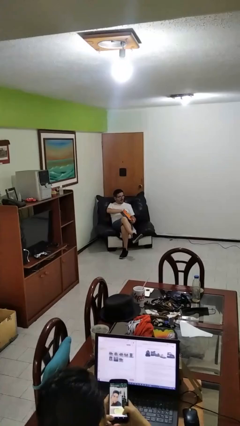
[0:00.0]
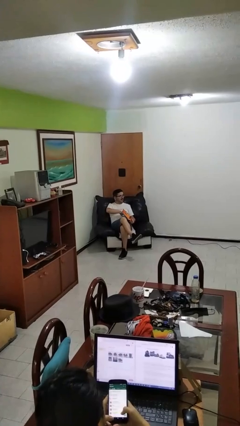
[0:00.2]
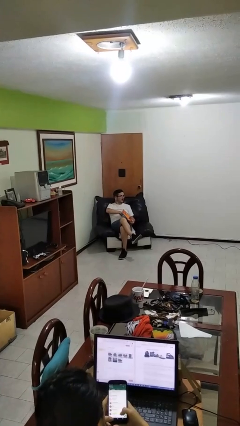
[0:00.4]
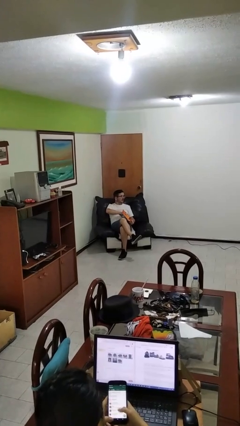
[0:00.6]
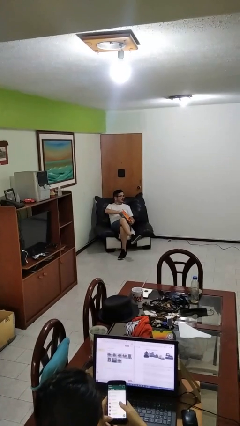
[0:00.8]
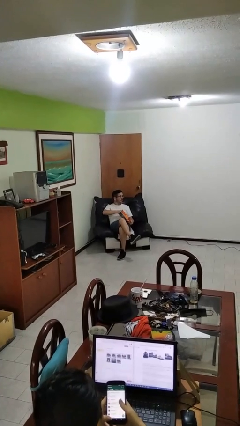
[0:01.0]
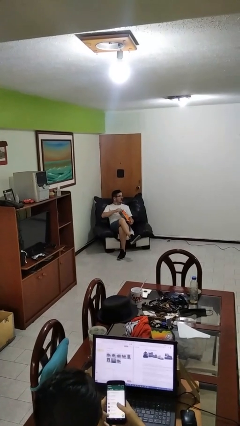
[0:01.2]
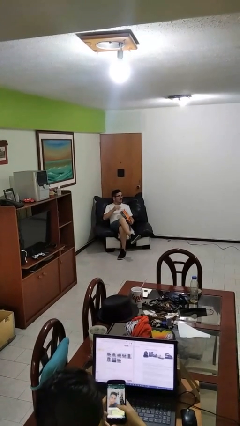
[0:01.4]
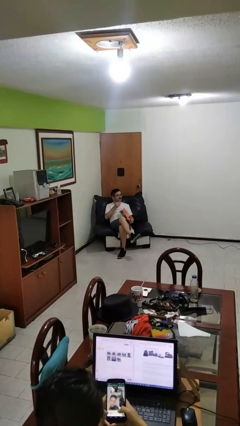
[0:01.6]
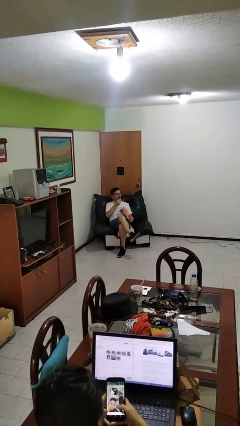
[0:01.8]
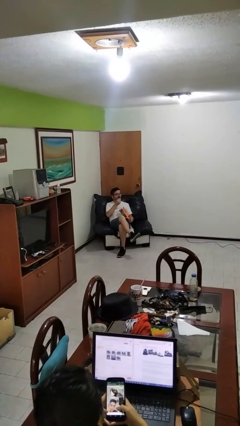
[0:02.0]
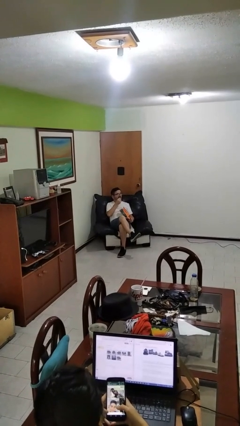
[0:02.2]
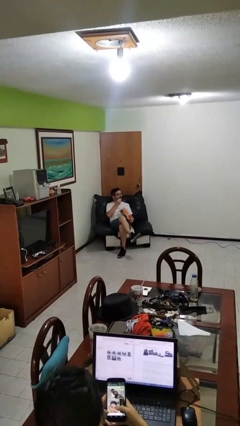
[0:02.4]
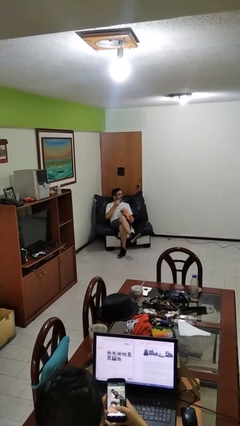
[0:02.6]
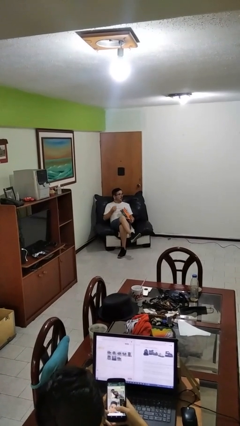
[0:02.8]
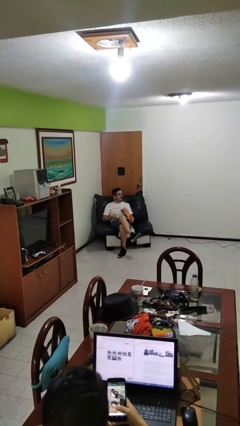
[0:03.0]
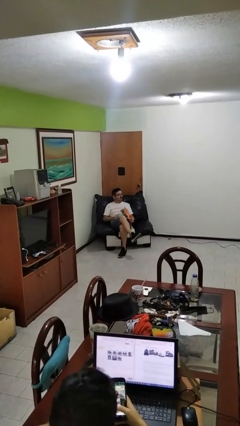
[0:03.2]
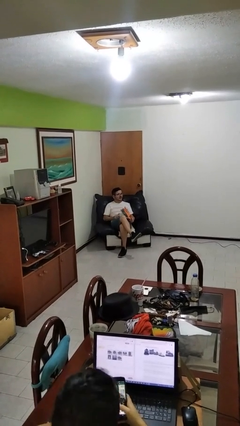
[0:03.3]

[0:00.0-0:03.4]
person eats snack from bag

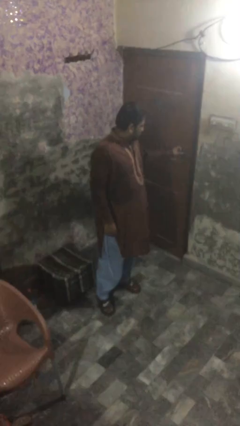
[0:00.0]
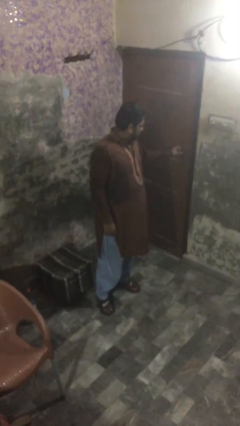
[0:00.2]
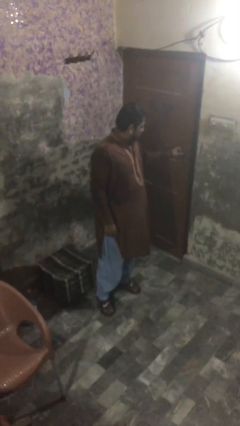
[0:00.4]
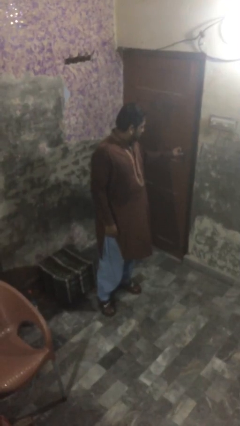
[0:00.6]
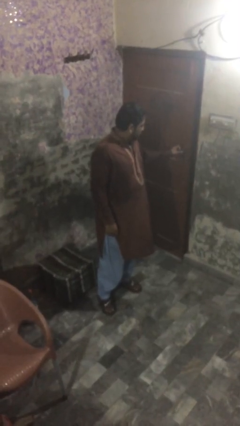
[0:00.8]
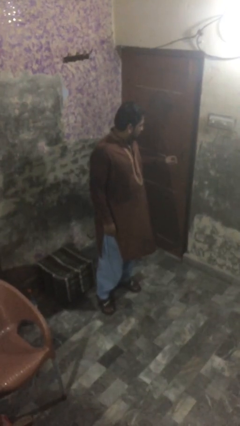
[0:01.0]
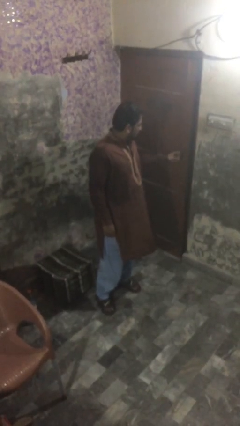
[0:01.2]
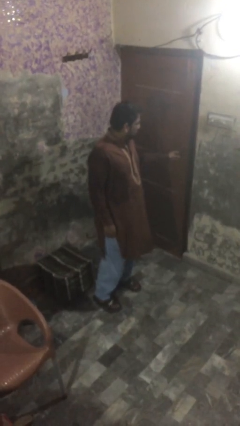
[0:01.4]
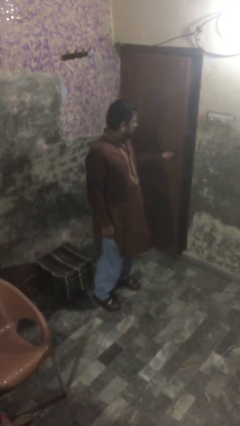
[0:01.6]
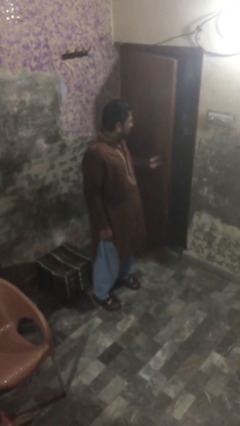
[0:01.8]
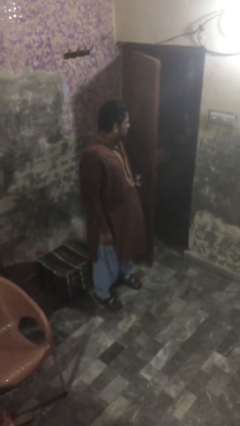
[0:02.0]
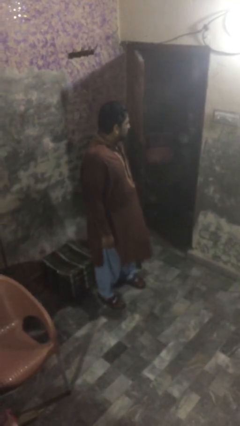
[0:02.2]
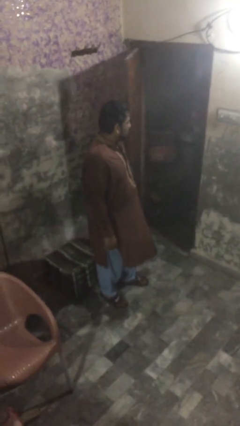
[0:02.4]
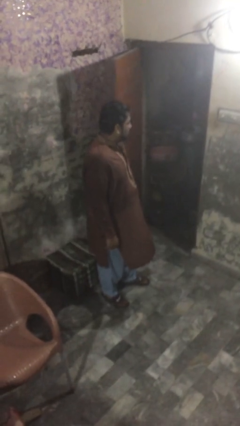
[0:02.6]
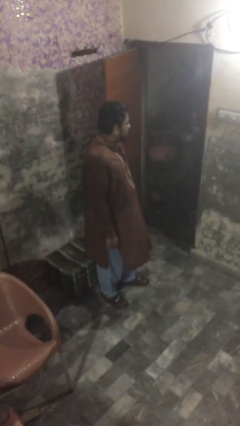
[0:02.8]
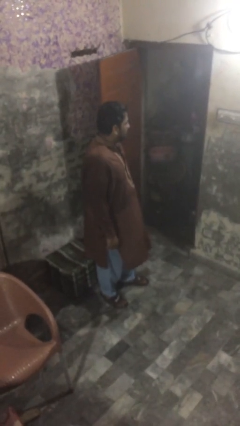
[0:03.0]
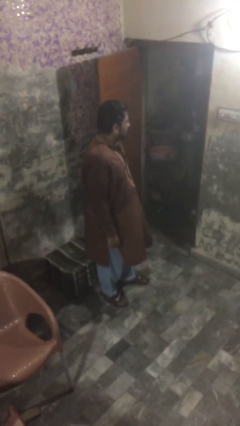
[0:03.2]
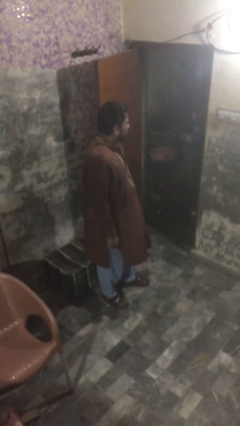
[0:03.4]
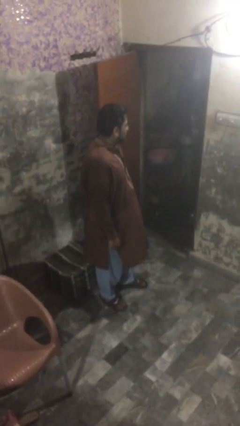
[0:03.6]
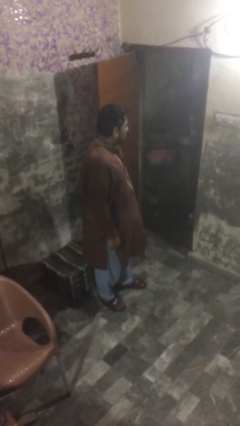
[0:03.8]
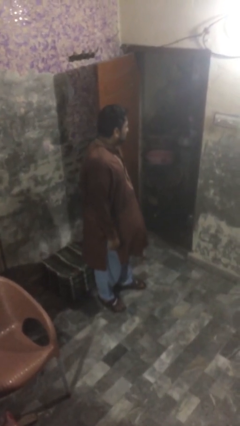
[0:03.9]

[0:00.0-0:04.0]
person opens facility door

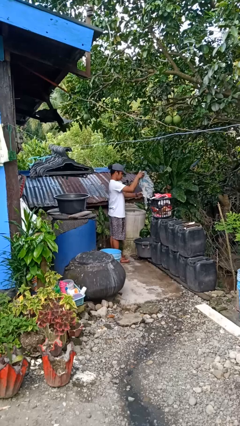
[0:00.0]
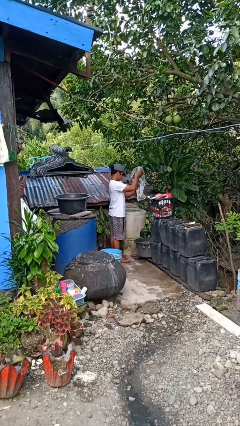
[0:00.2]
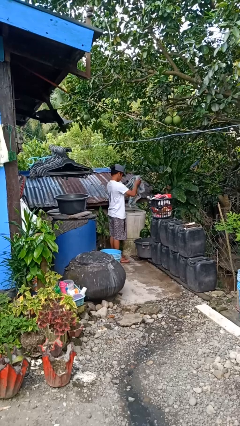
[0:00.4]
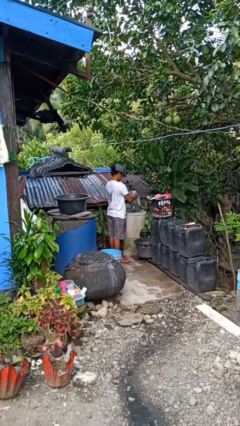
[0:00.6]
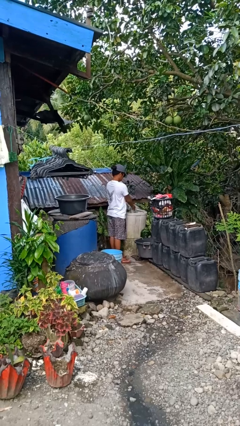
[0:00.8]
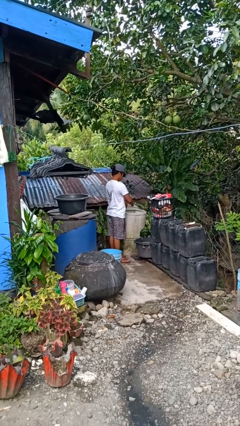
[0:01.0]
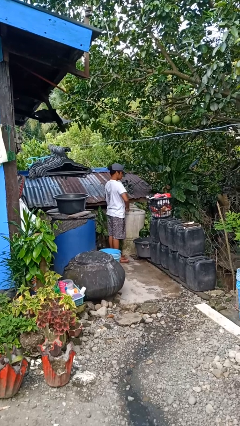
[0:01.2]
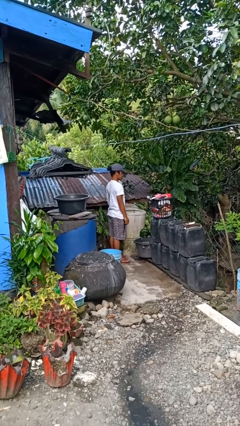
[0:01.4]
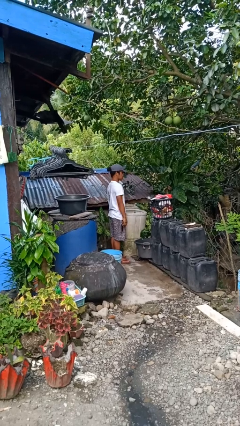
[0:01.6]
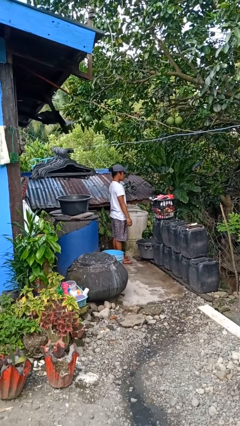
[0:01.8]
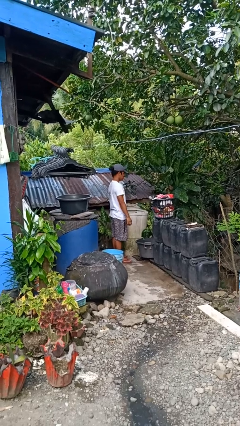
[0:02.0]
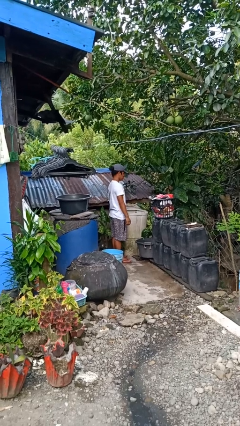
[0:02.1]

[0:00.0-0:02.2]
person loads clotheswasher

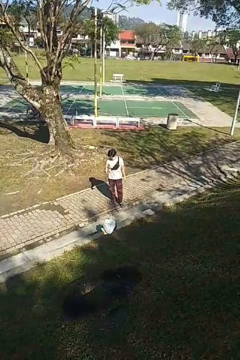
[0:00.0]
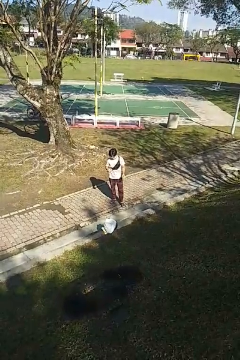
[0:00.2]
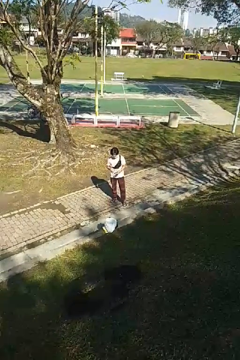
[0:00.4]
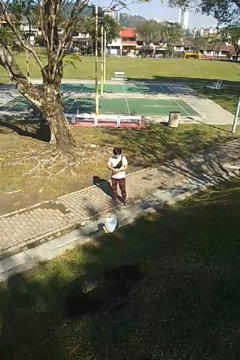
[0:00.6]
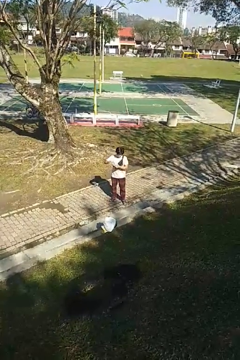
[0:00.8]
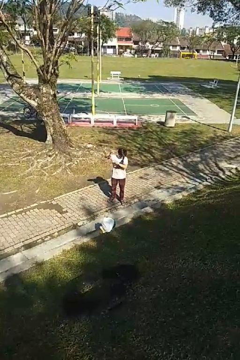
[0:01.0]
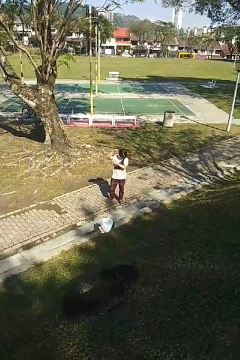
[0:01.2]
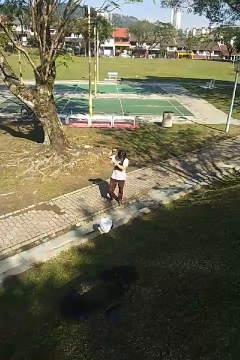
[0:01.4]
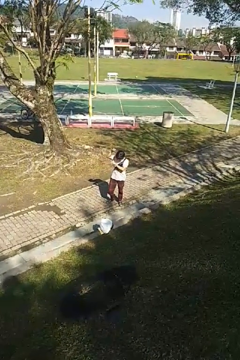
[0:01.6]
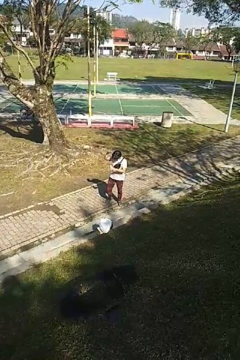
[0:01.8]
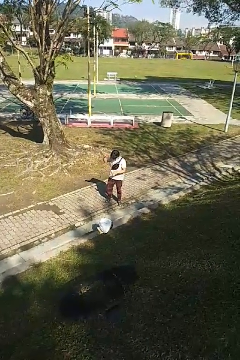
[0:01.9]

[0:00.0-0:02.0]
person applies deodorant

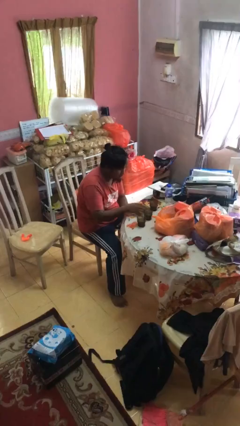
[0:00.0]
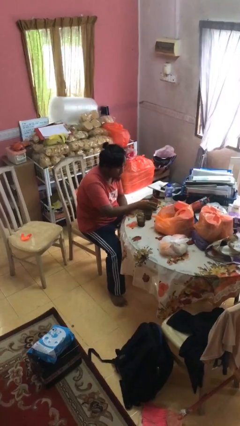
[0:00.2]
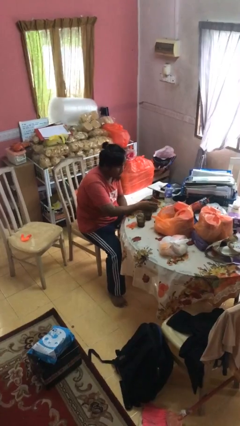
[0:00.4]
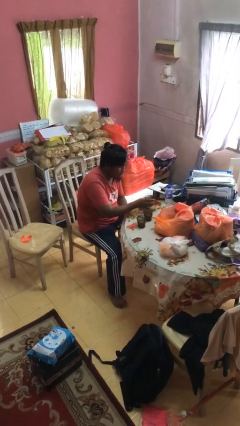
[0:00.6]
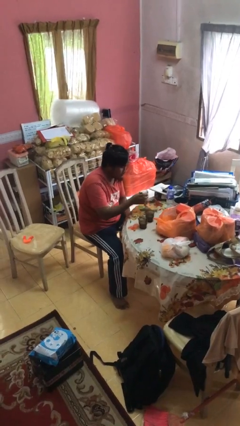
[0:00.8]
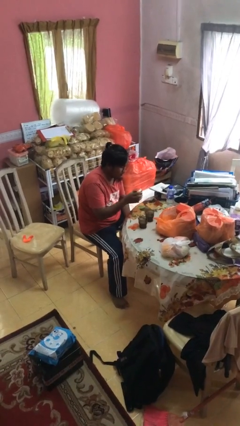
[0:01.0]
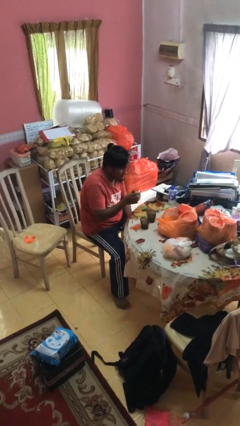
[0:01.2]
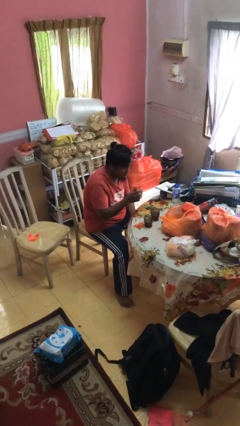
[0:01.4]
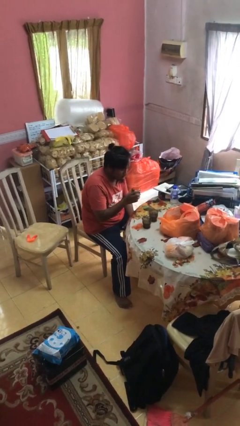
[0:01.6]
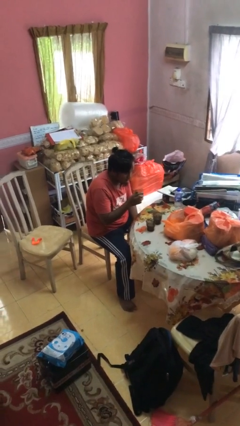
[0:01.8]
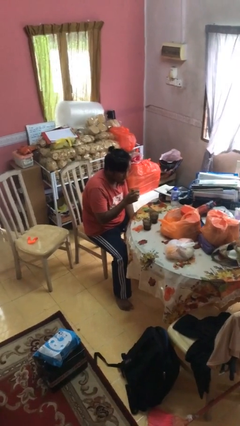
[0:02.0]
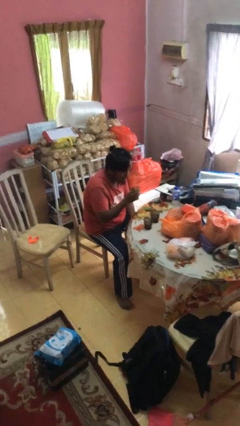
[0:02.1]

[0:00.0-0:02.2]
person picks up object from table

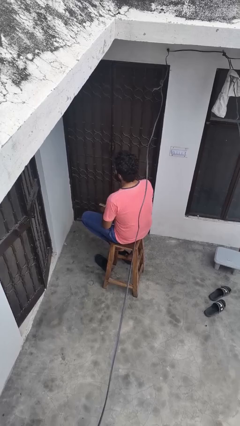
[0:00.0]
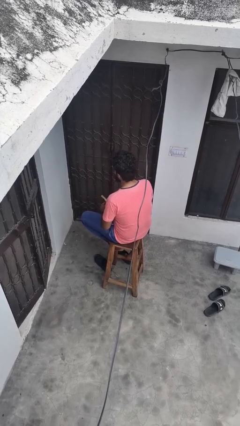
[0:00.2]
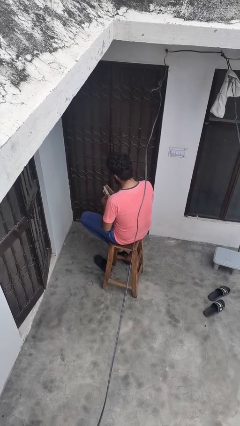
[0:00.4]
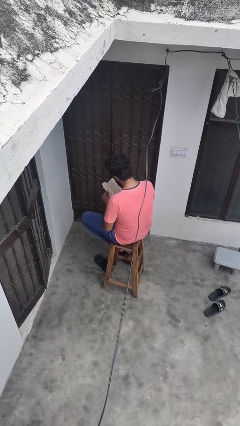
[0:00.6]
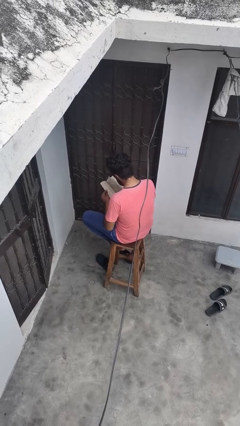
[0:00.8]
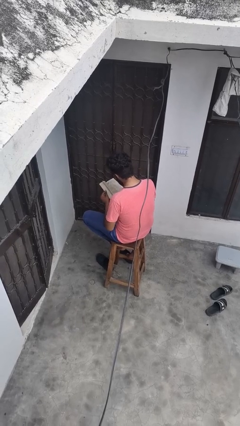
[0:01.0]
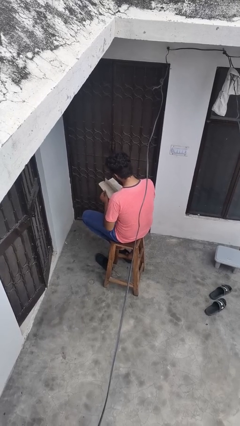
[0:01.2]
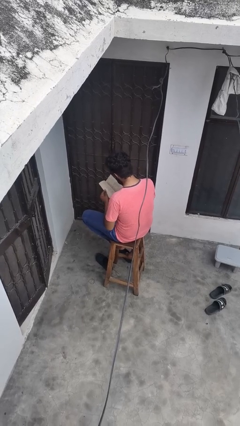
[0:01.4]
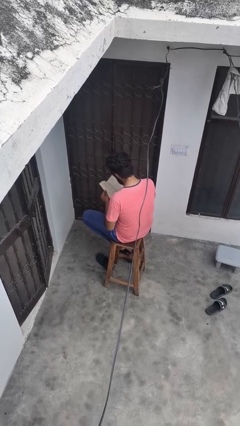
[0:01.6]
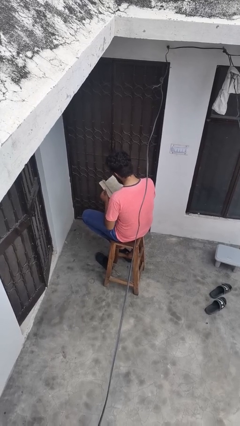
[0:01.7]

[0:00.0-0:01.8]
person reads book

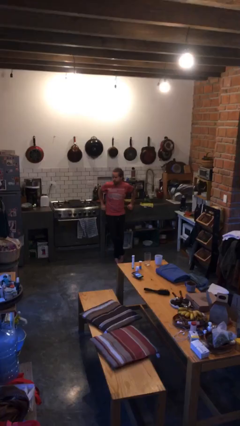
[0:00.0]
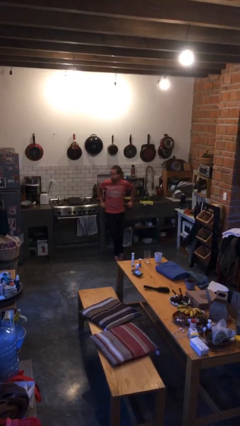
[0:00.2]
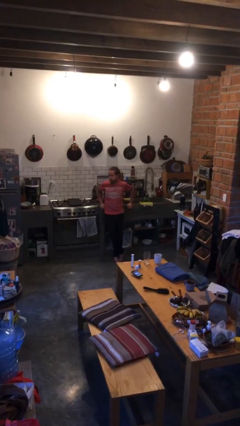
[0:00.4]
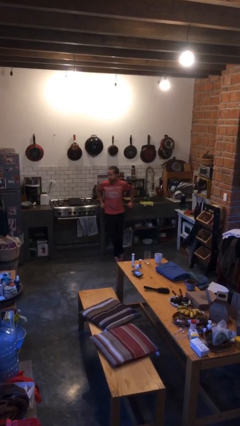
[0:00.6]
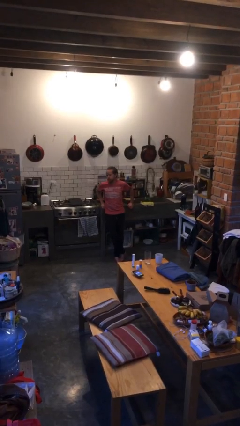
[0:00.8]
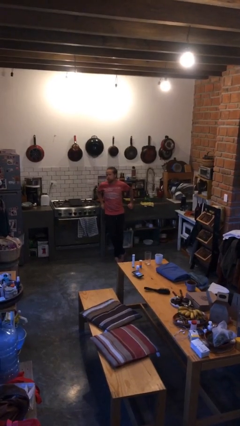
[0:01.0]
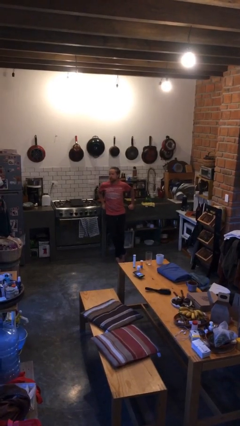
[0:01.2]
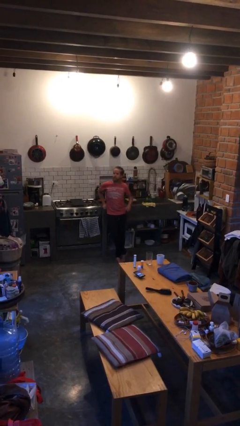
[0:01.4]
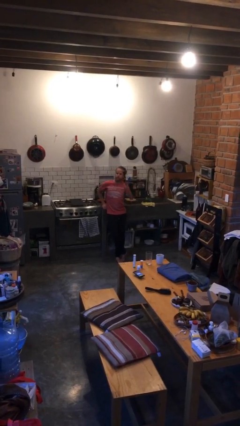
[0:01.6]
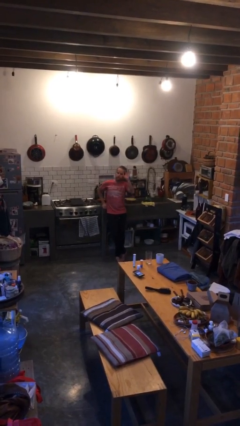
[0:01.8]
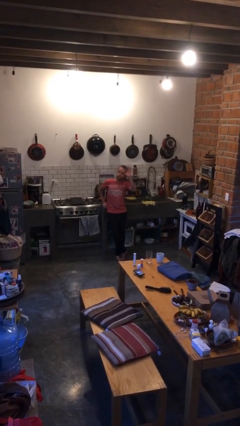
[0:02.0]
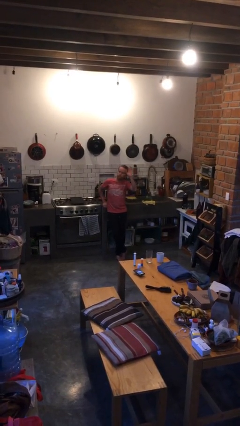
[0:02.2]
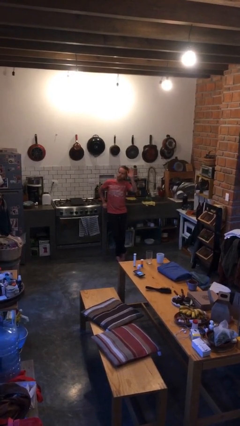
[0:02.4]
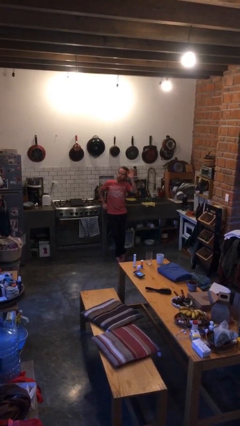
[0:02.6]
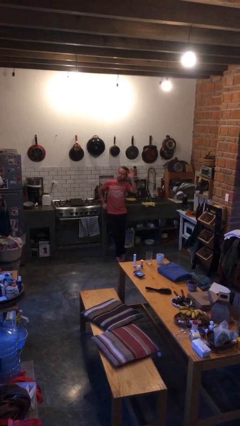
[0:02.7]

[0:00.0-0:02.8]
person gestures raise hand
